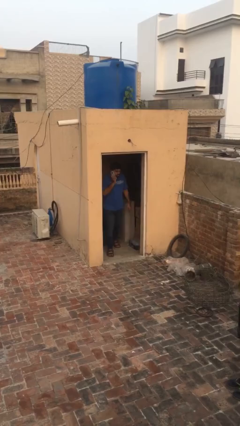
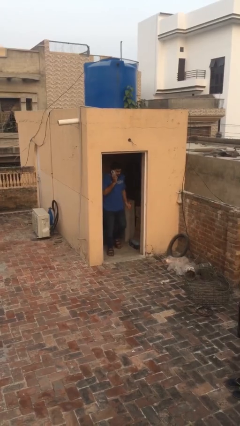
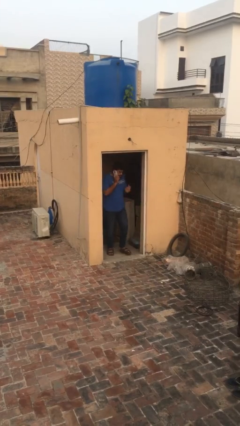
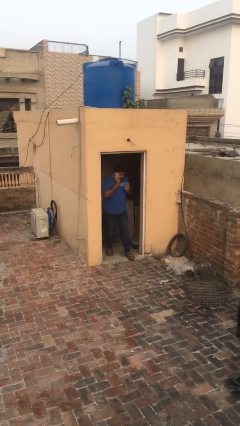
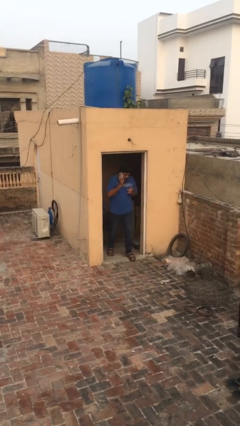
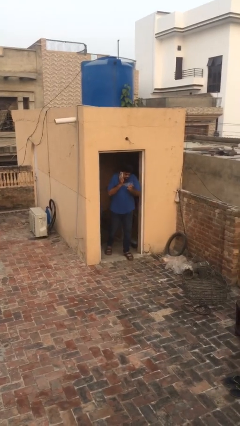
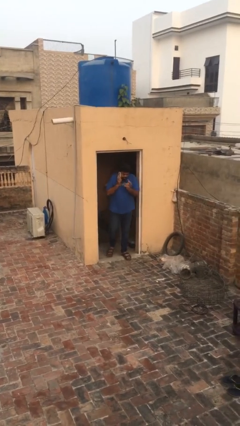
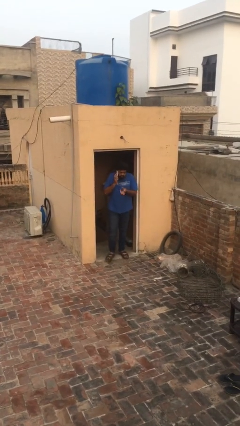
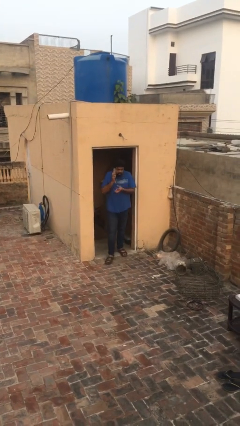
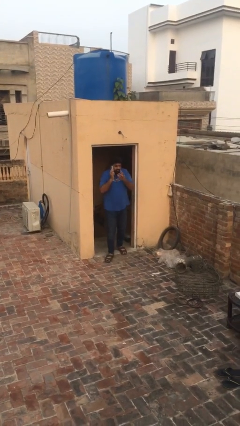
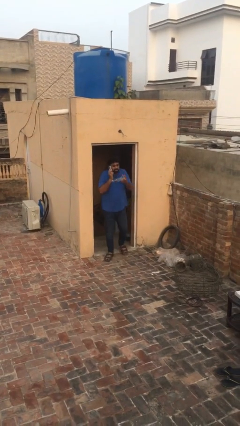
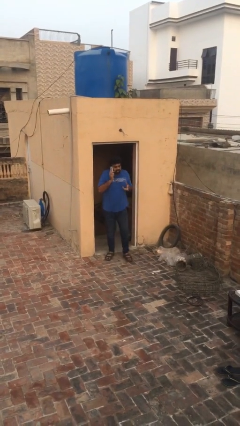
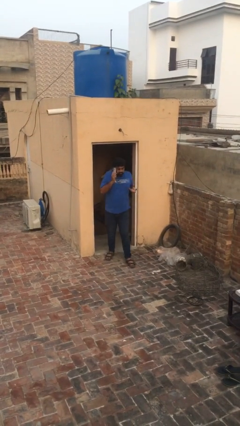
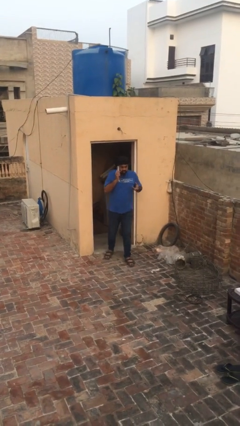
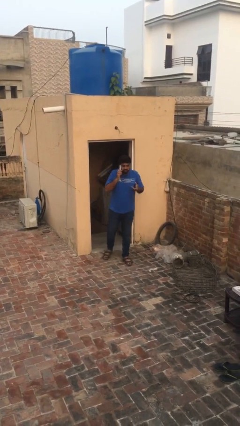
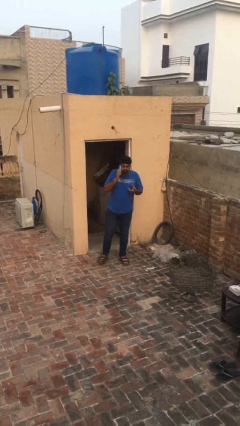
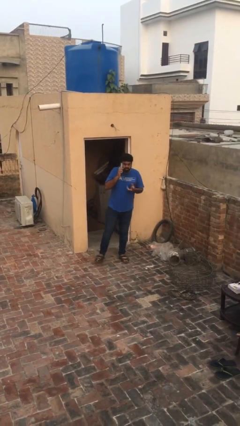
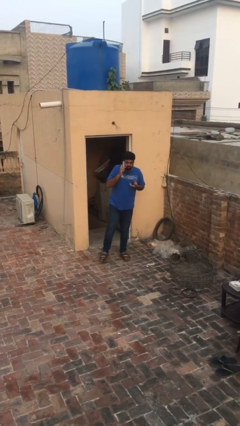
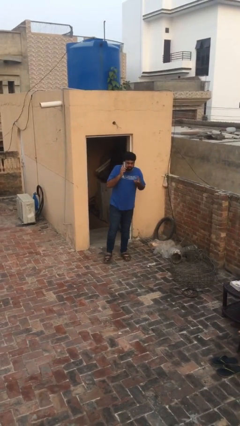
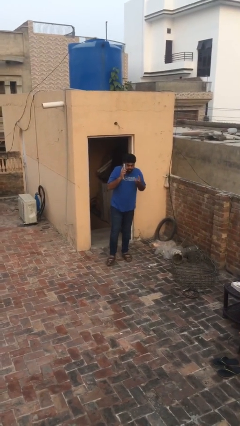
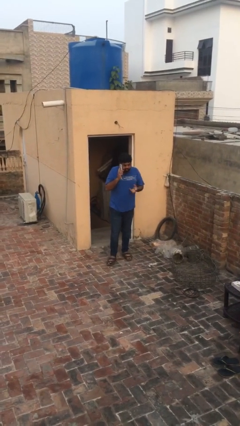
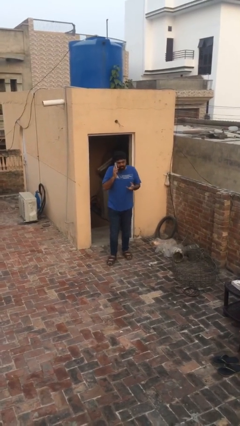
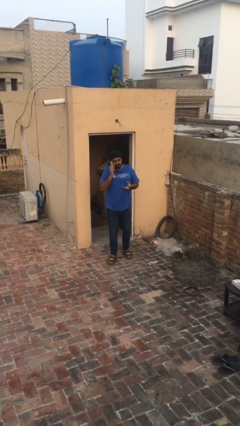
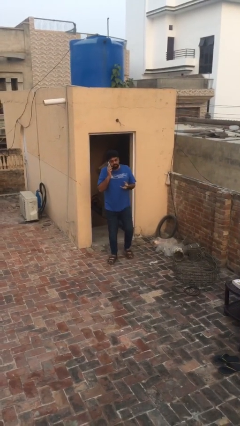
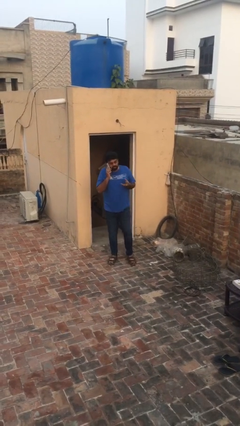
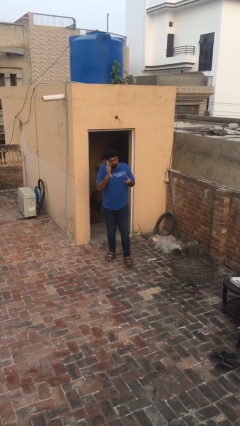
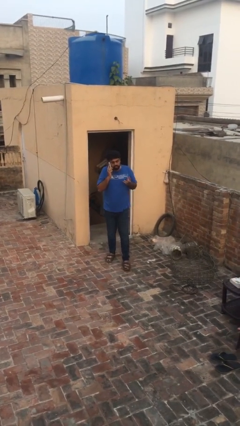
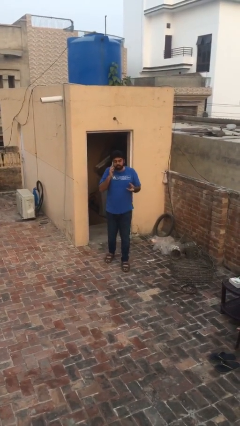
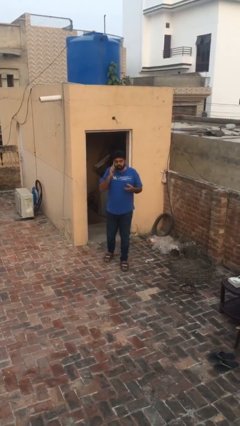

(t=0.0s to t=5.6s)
person enters scene through structure

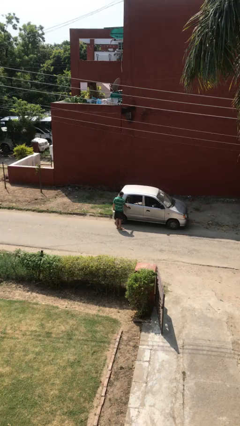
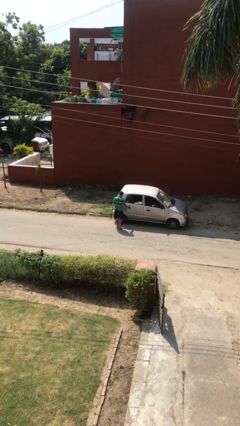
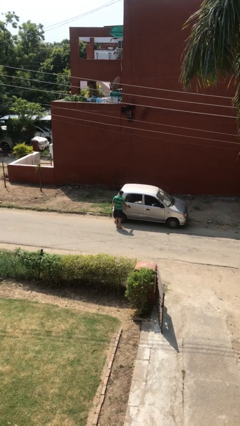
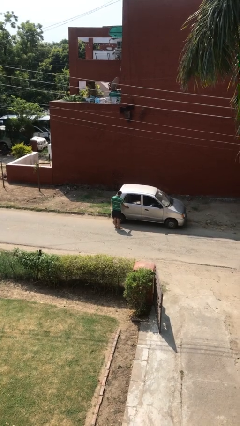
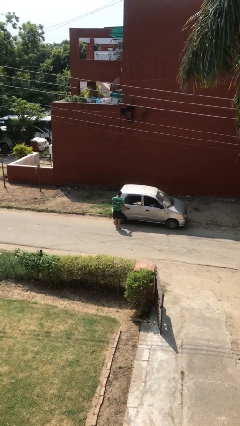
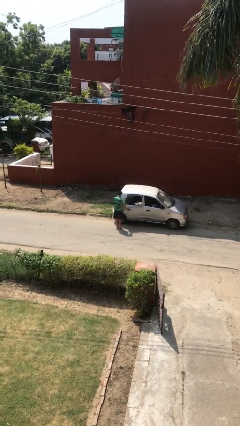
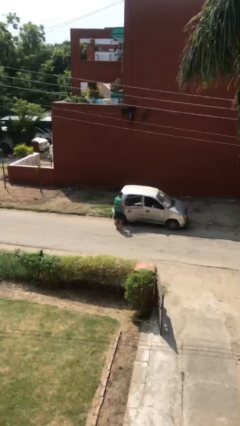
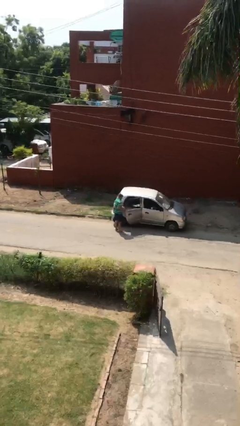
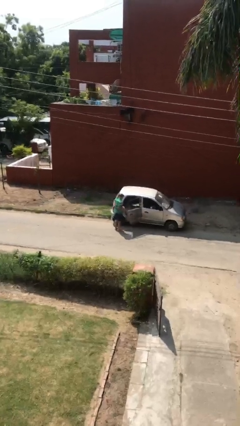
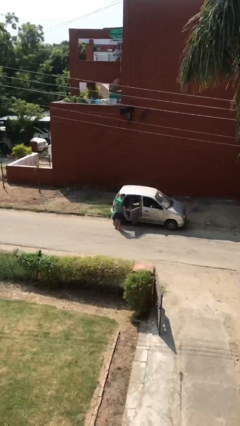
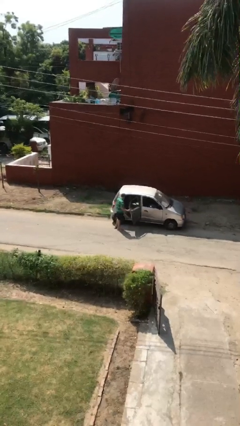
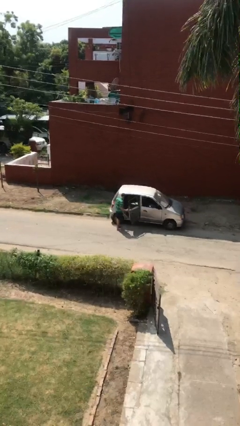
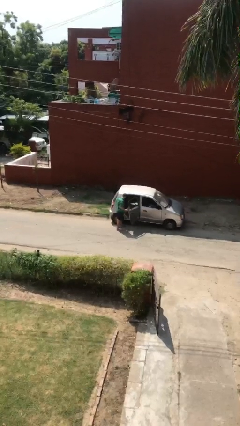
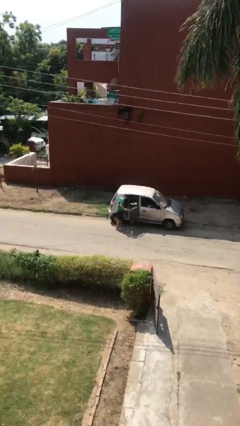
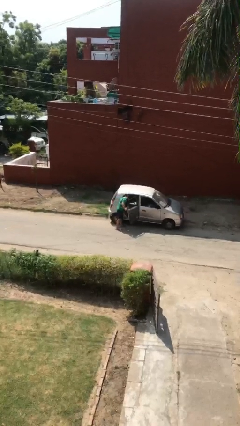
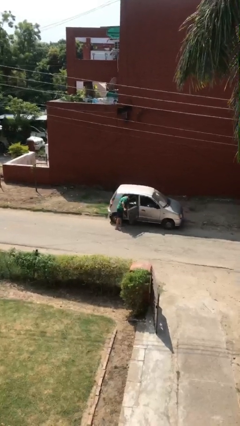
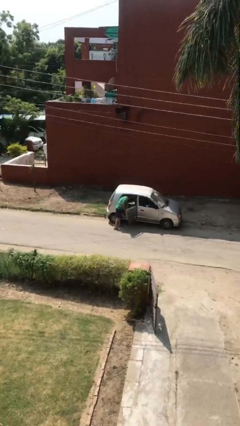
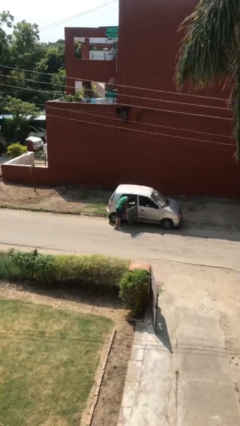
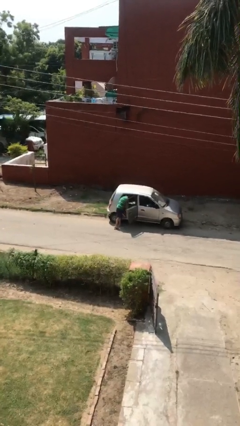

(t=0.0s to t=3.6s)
person opens car door

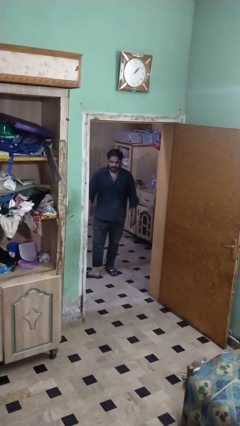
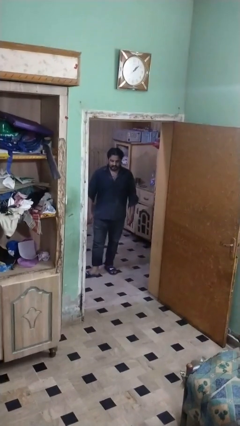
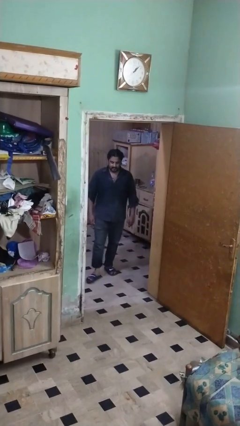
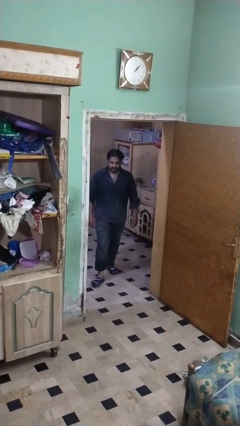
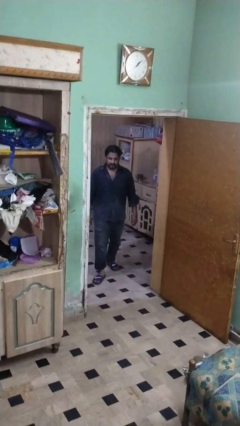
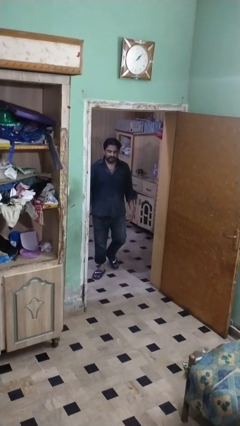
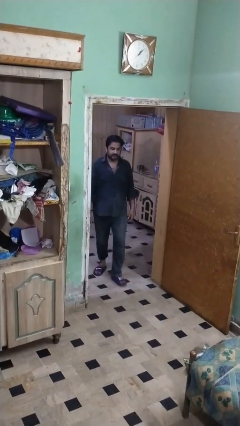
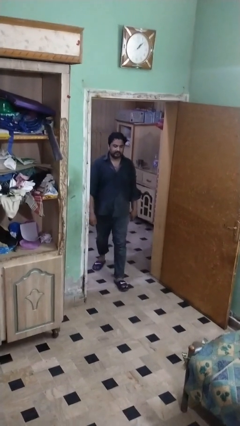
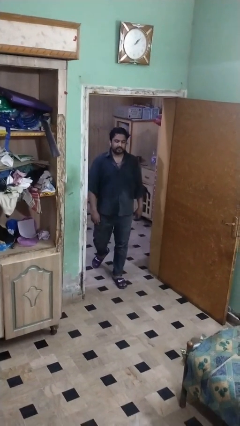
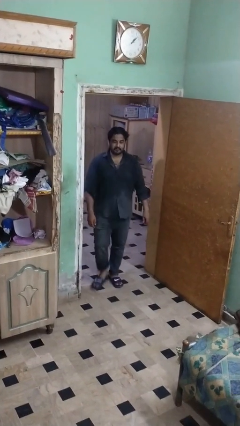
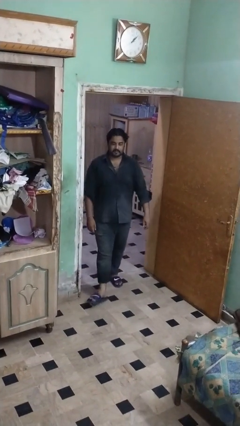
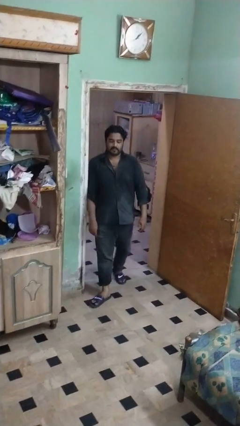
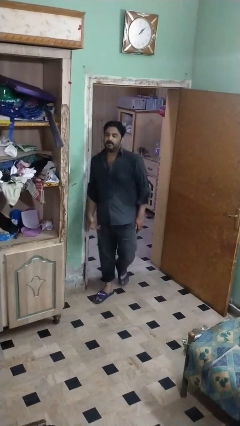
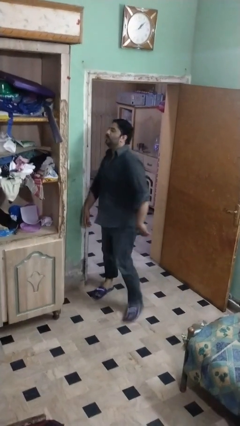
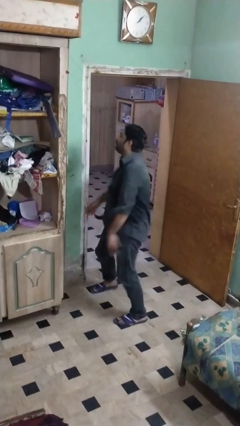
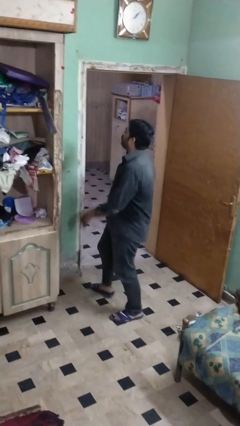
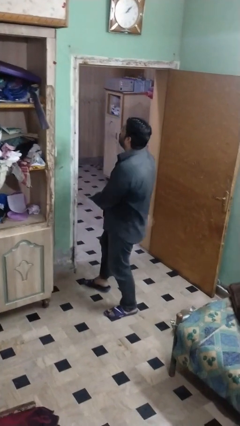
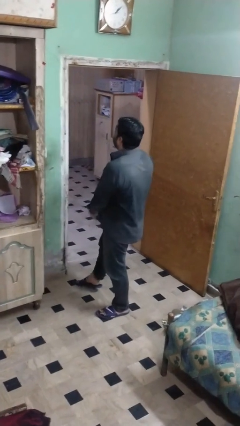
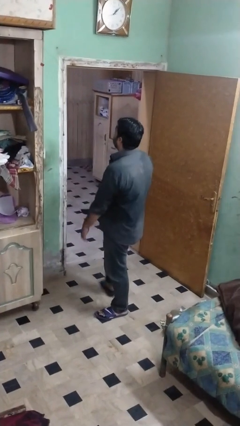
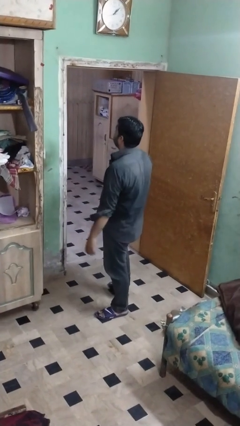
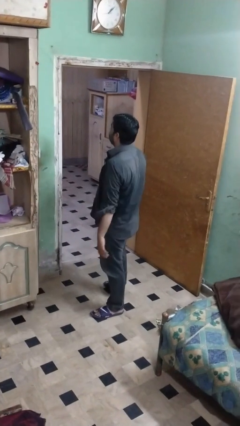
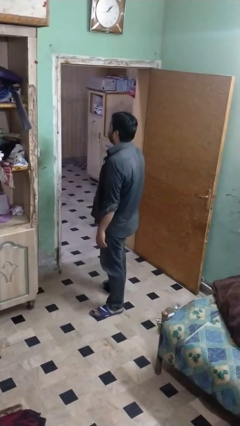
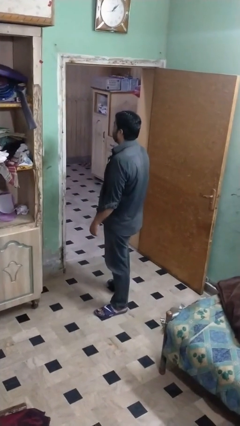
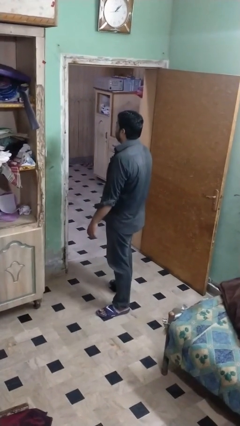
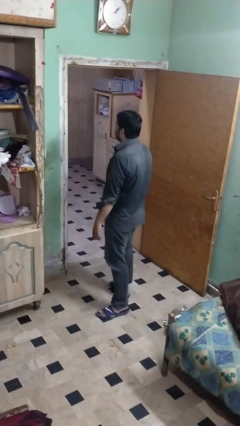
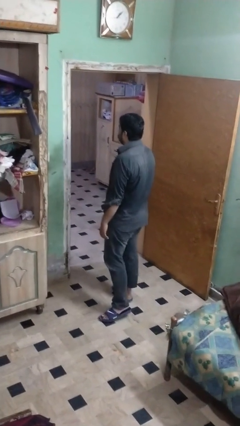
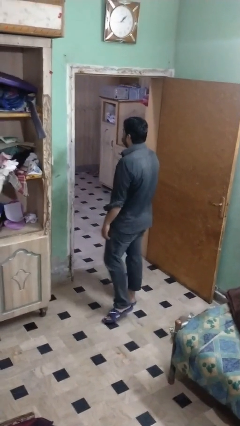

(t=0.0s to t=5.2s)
person bumps into wall

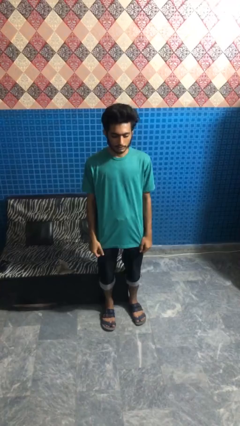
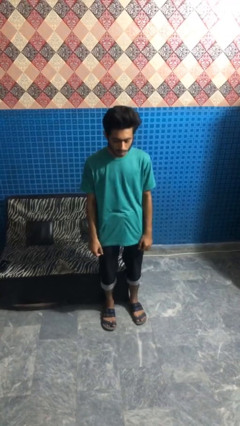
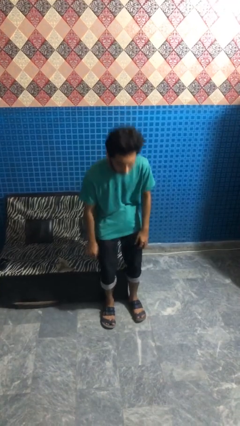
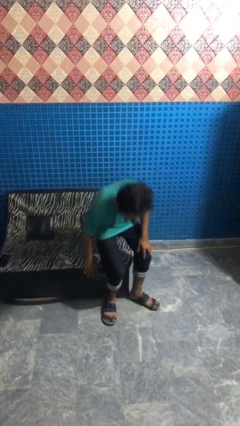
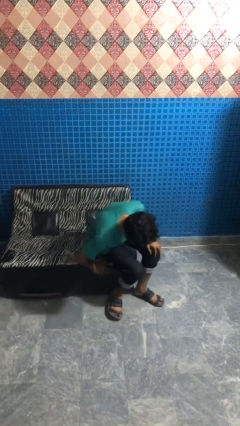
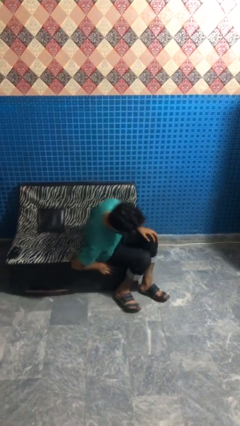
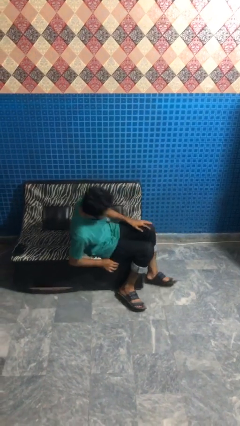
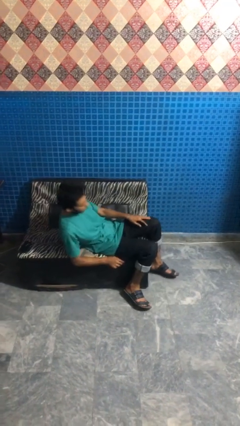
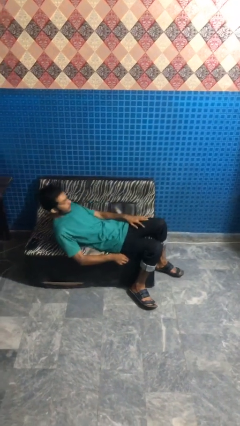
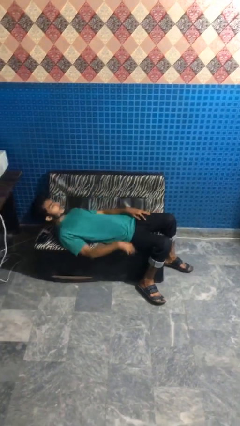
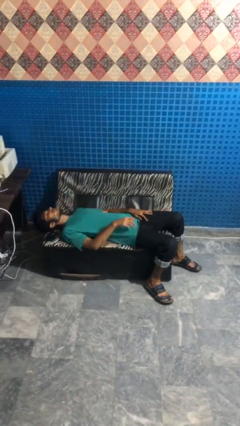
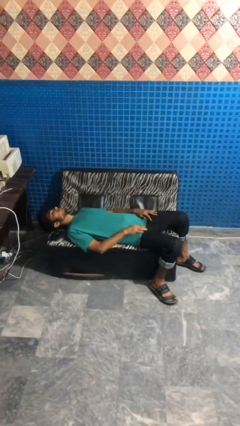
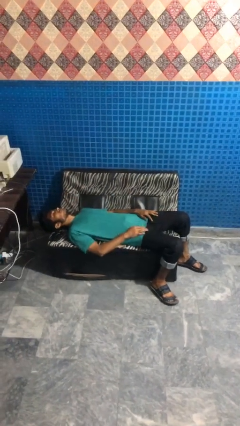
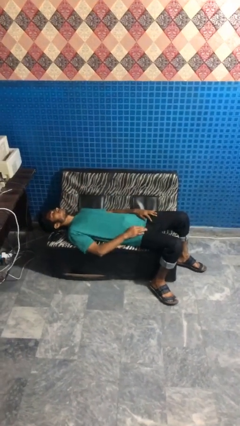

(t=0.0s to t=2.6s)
person lies down on couch

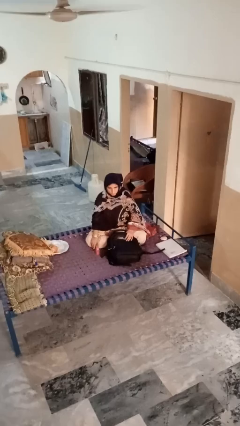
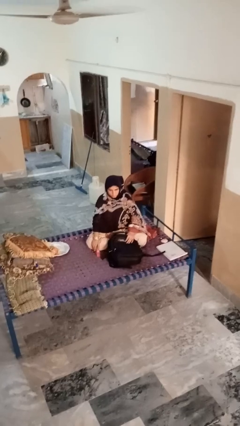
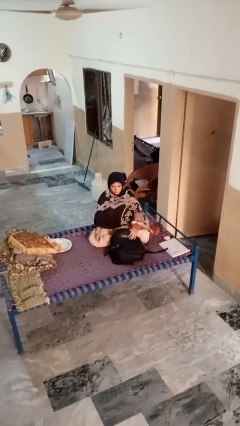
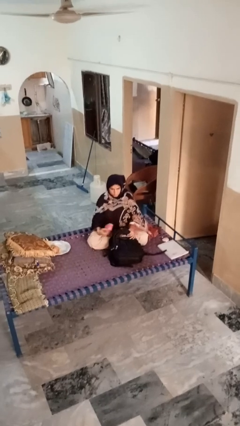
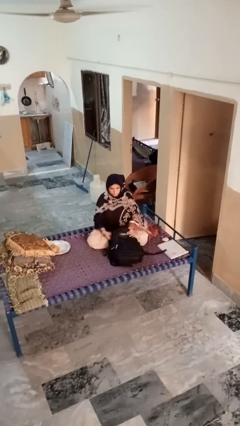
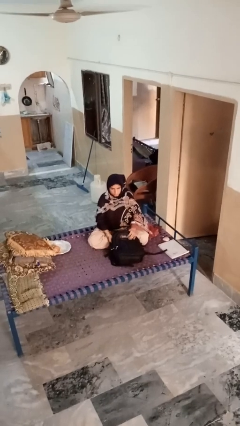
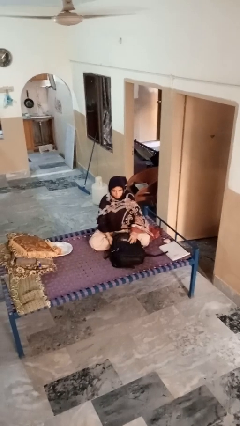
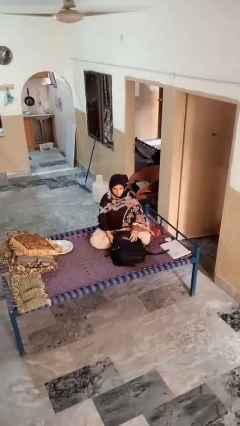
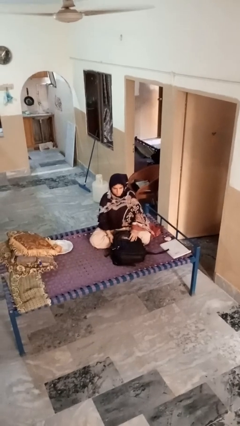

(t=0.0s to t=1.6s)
person puts object into bag
